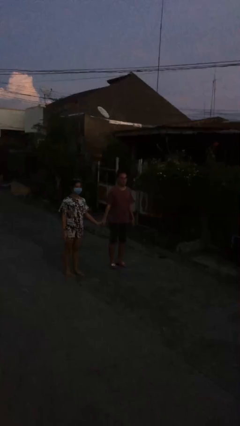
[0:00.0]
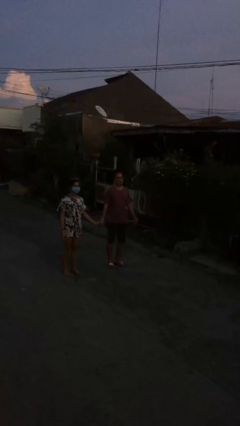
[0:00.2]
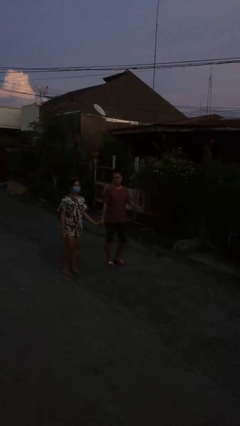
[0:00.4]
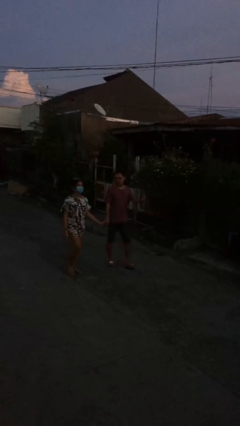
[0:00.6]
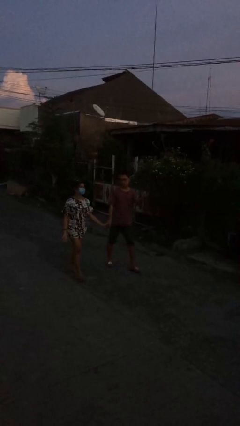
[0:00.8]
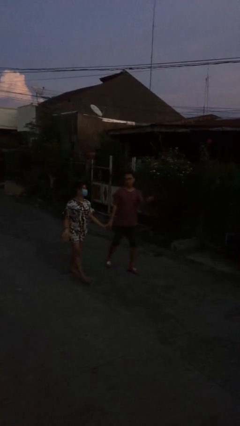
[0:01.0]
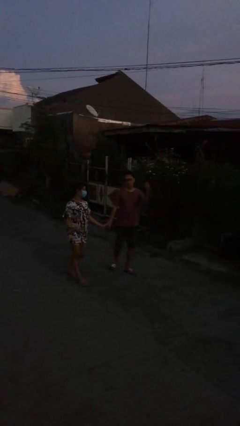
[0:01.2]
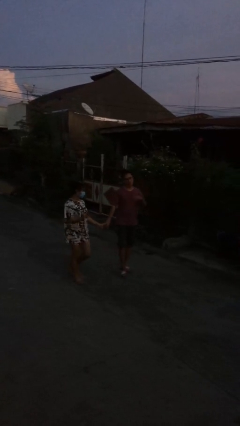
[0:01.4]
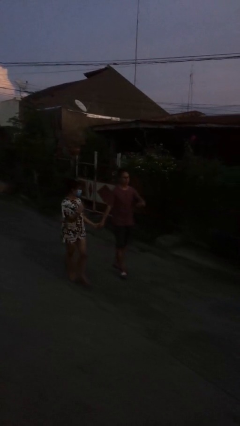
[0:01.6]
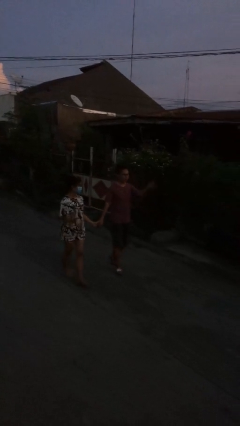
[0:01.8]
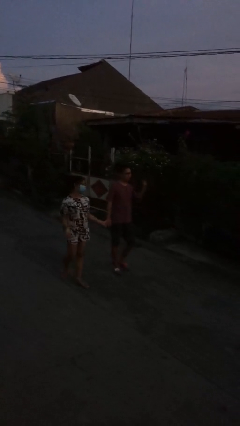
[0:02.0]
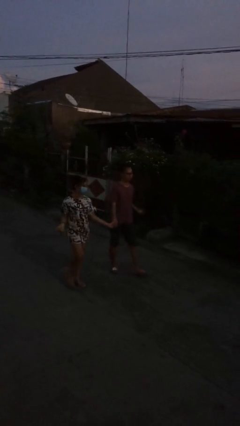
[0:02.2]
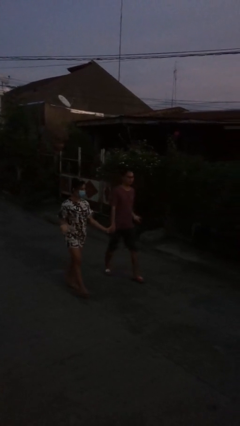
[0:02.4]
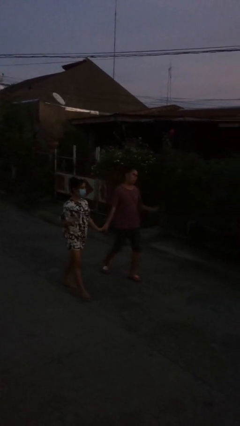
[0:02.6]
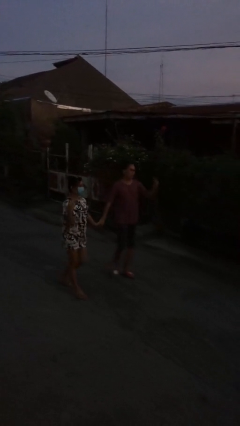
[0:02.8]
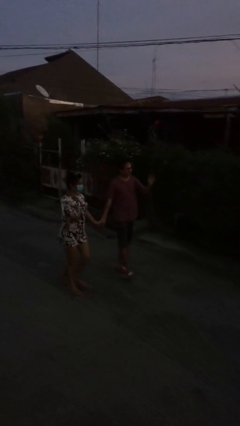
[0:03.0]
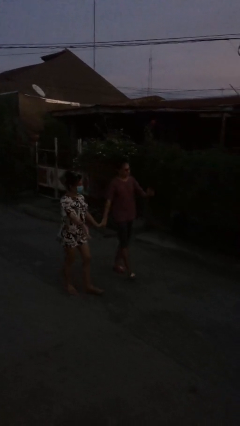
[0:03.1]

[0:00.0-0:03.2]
person holds hand

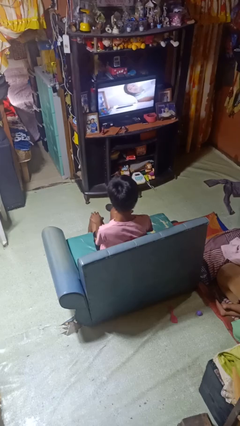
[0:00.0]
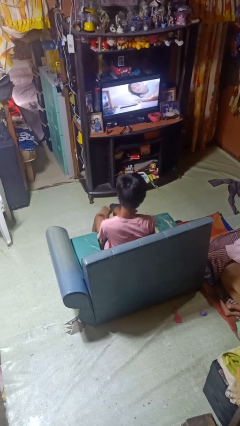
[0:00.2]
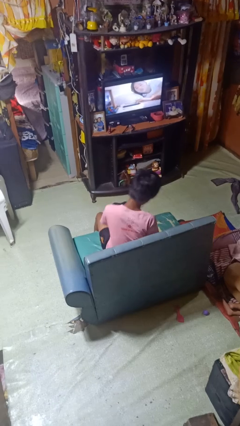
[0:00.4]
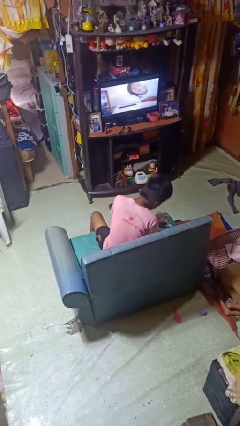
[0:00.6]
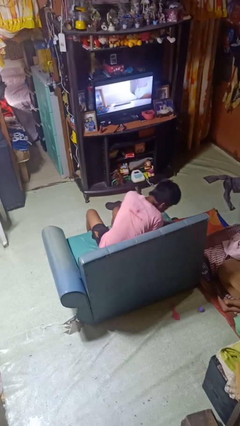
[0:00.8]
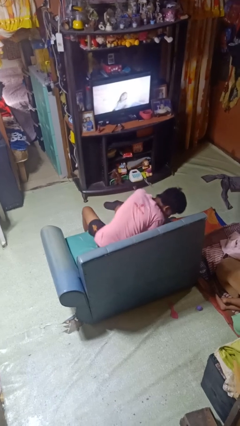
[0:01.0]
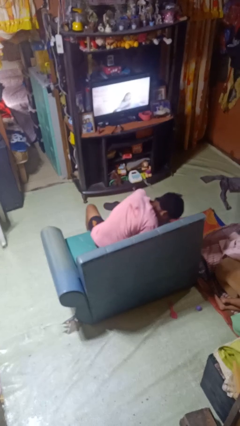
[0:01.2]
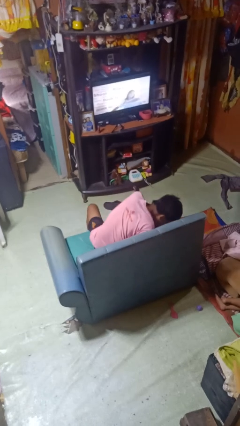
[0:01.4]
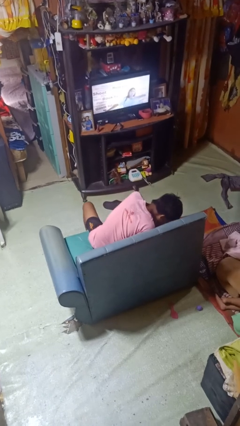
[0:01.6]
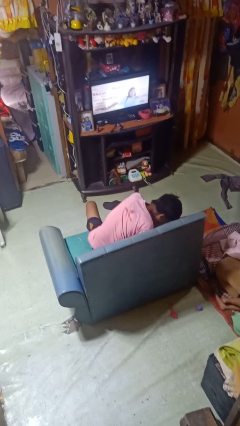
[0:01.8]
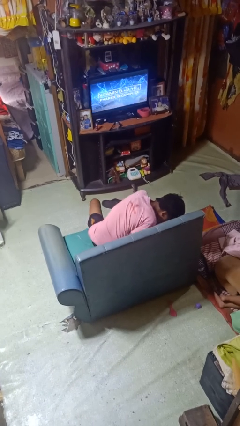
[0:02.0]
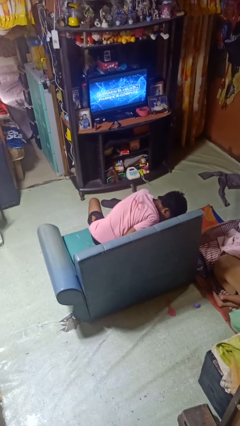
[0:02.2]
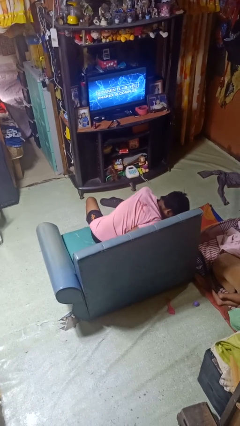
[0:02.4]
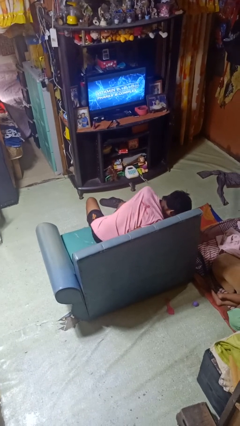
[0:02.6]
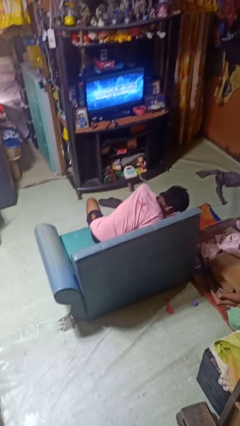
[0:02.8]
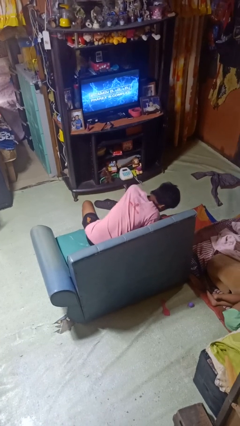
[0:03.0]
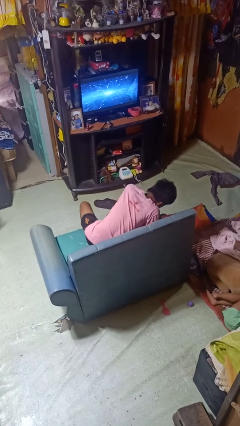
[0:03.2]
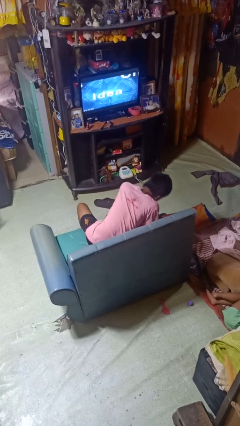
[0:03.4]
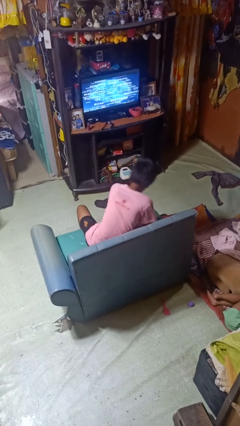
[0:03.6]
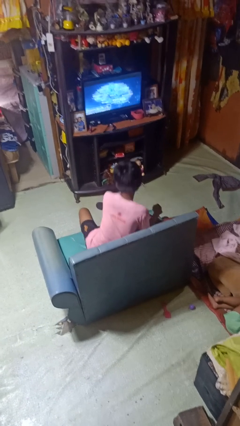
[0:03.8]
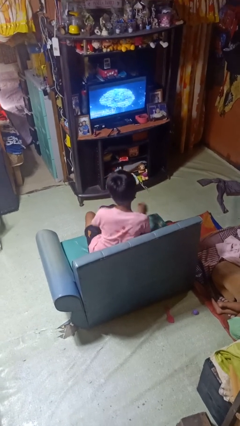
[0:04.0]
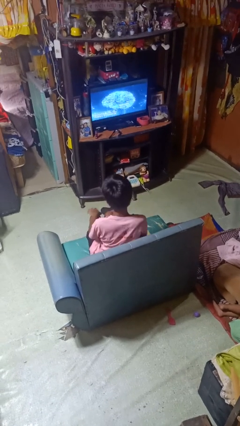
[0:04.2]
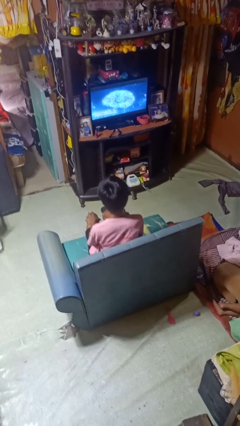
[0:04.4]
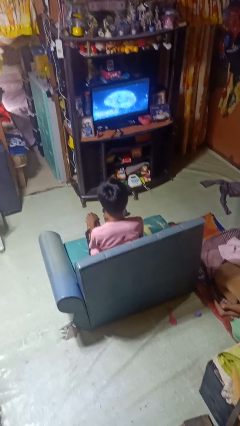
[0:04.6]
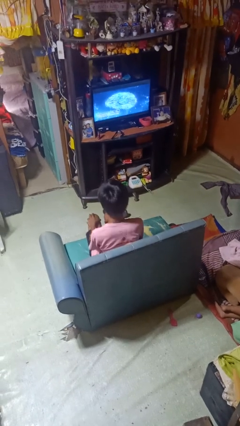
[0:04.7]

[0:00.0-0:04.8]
person searches in couch

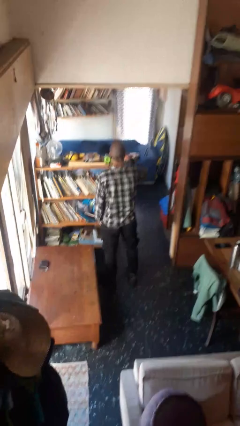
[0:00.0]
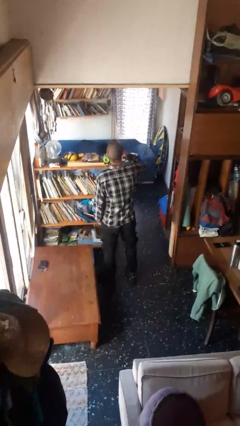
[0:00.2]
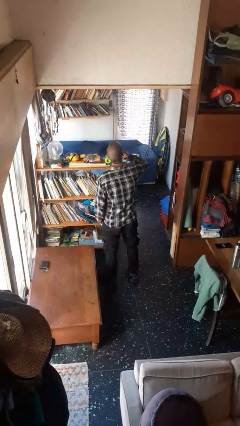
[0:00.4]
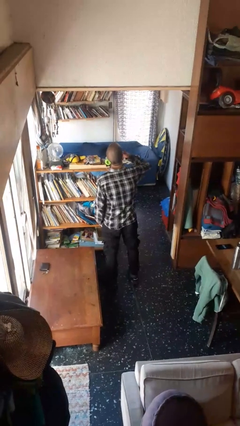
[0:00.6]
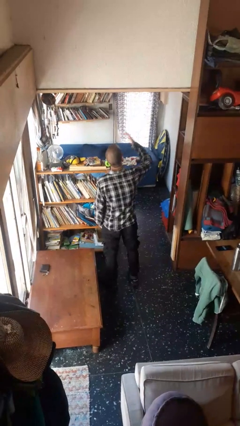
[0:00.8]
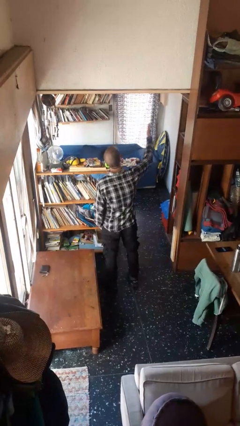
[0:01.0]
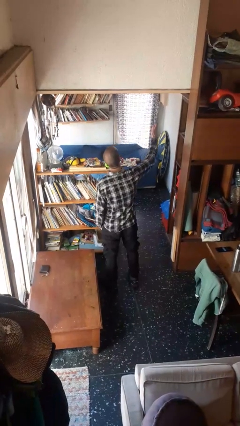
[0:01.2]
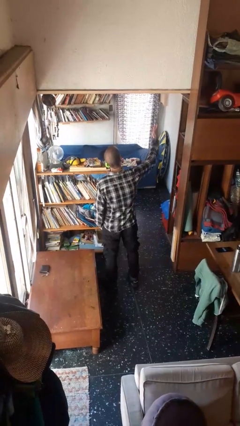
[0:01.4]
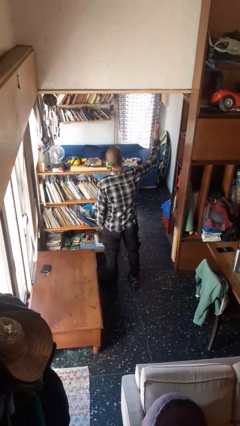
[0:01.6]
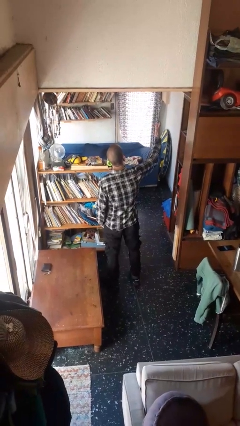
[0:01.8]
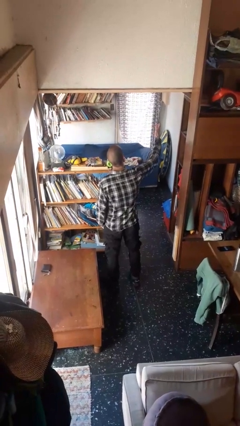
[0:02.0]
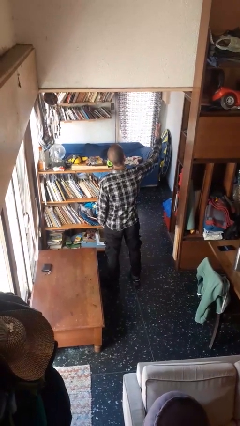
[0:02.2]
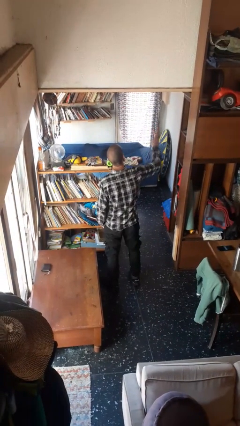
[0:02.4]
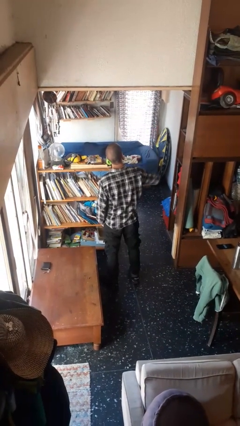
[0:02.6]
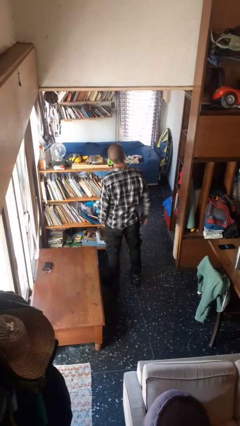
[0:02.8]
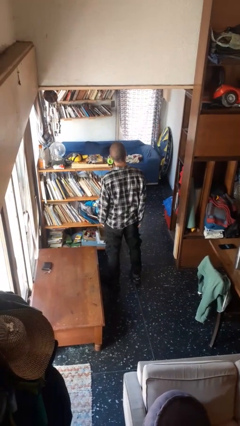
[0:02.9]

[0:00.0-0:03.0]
person gestures blow kiss

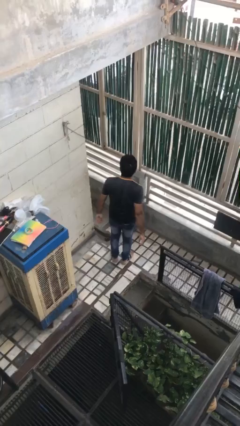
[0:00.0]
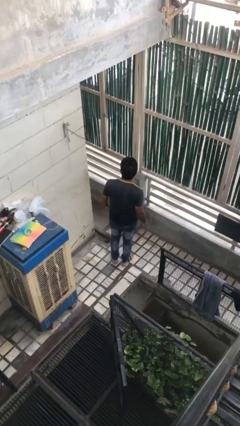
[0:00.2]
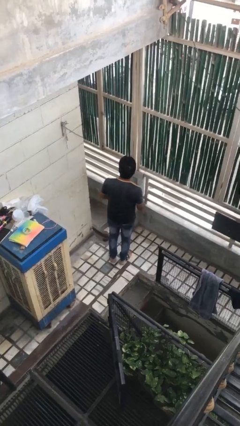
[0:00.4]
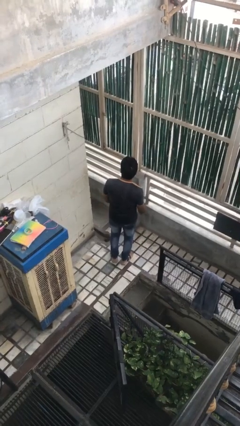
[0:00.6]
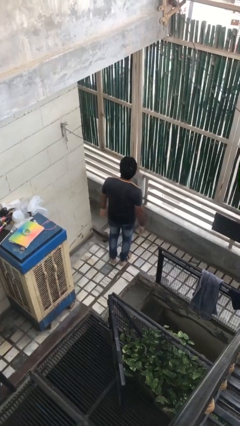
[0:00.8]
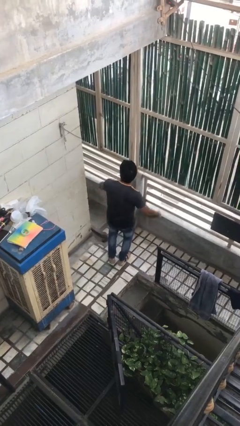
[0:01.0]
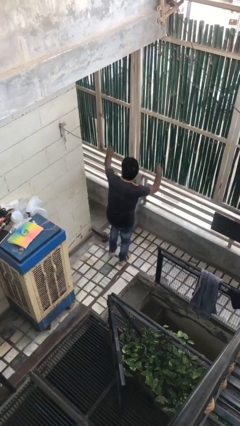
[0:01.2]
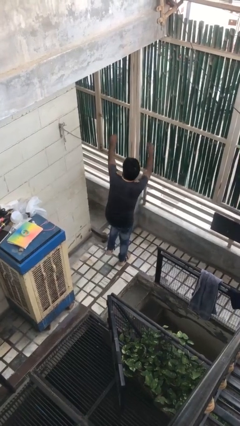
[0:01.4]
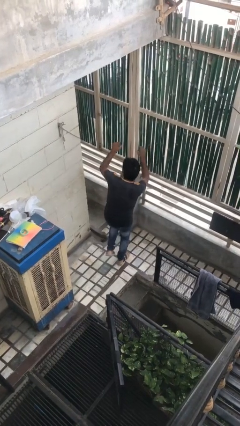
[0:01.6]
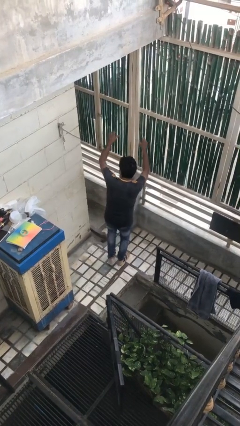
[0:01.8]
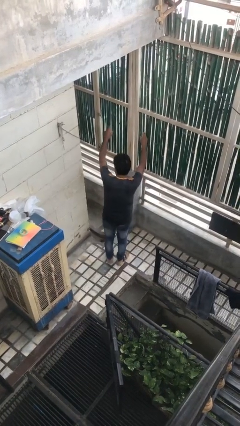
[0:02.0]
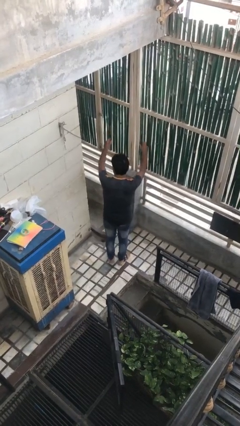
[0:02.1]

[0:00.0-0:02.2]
person dances in place

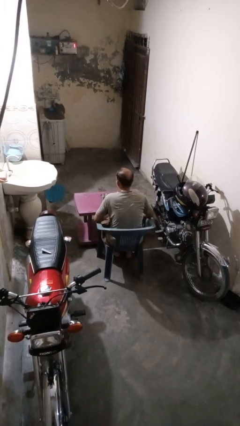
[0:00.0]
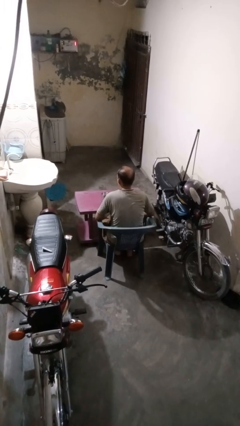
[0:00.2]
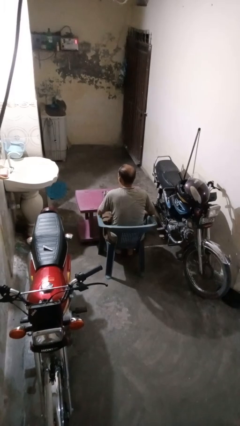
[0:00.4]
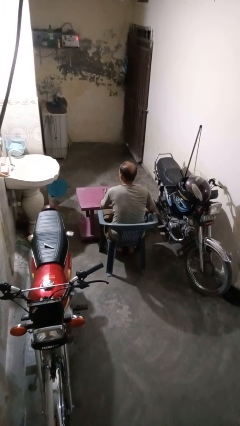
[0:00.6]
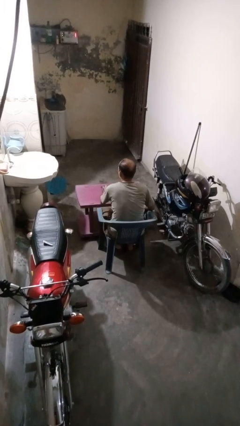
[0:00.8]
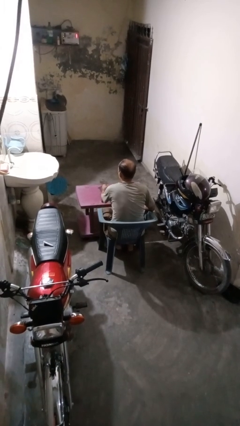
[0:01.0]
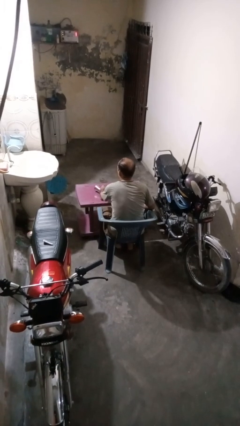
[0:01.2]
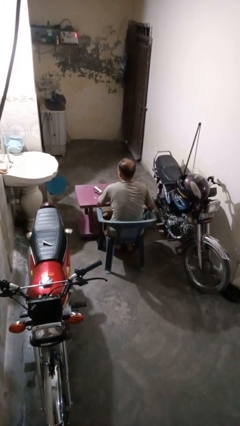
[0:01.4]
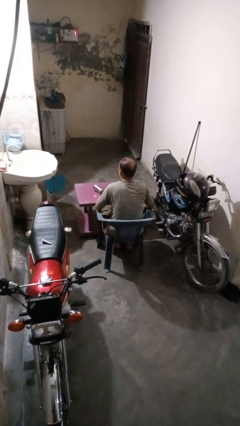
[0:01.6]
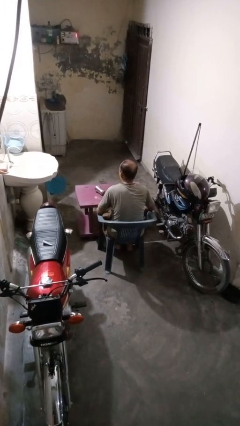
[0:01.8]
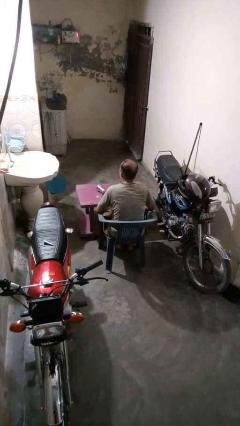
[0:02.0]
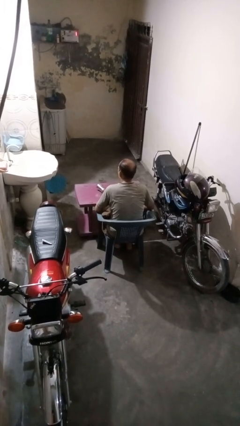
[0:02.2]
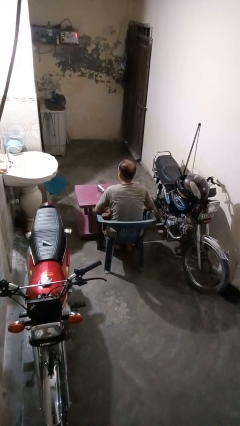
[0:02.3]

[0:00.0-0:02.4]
person knocks over glass

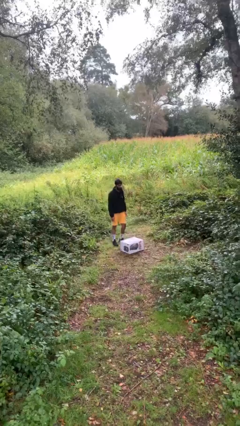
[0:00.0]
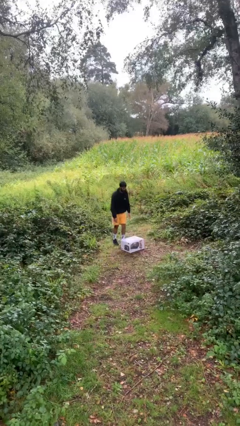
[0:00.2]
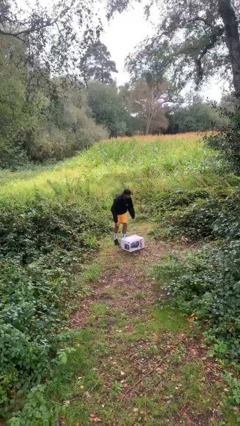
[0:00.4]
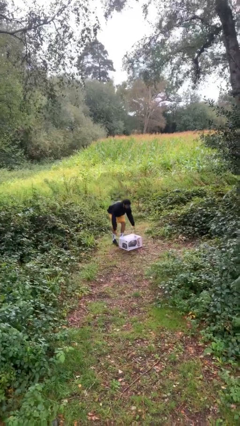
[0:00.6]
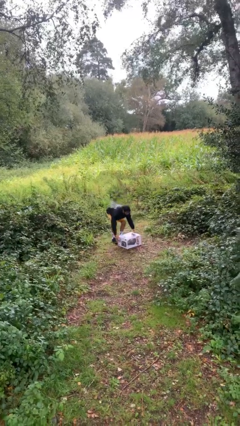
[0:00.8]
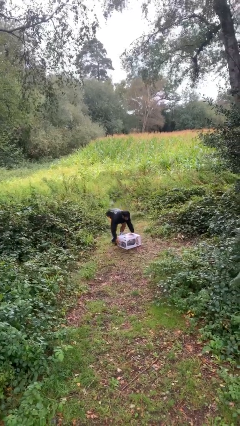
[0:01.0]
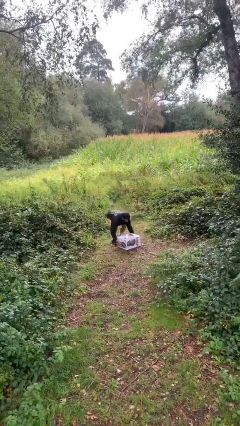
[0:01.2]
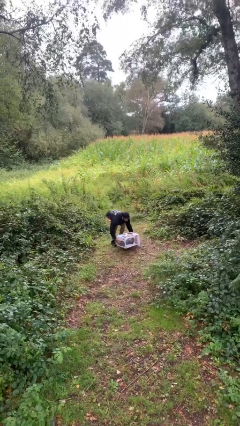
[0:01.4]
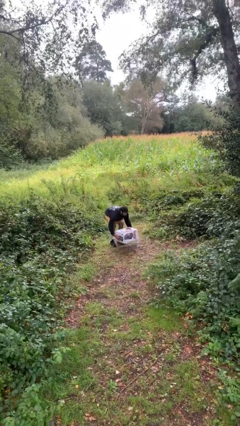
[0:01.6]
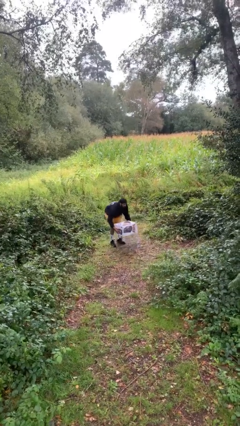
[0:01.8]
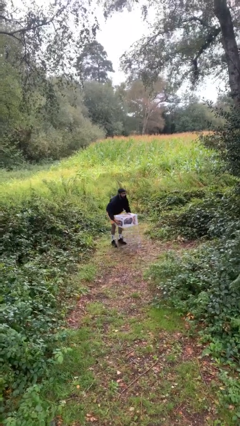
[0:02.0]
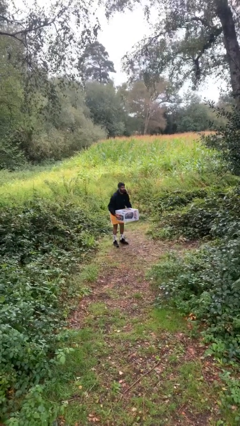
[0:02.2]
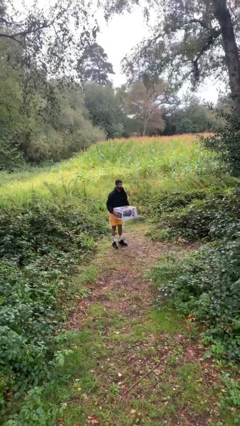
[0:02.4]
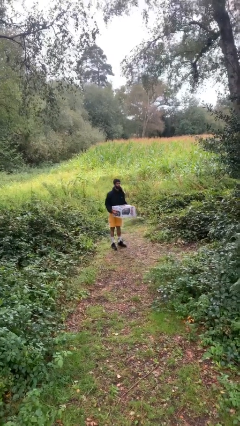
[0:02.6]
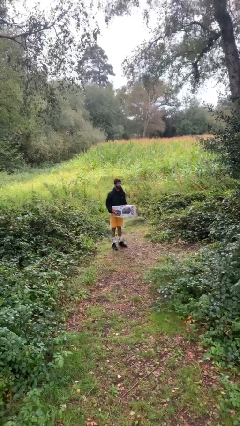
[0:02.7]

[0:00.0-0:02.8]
person picks up object from floor
